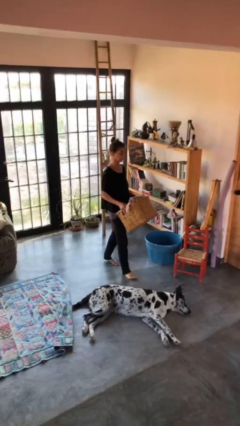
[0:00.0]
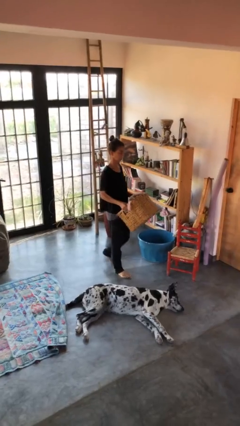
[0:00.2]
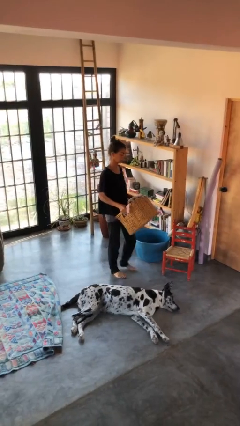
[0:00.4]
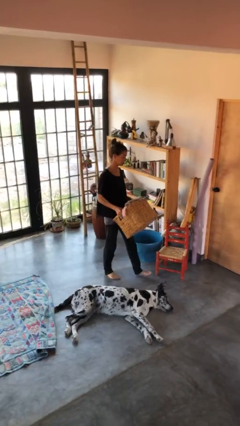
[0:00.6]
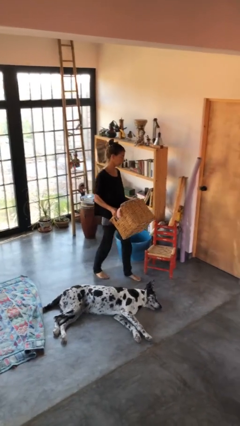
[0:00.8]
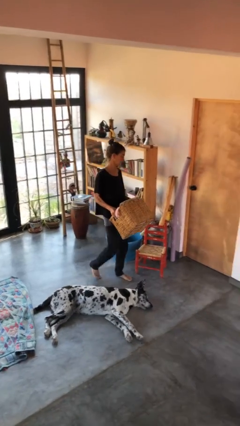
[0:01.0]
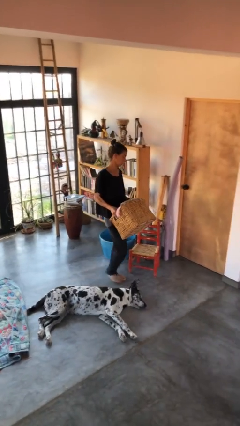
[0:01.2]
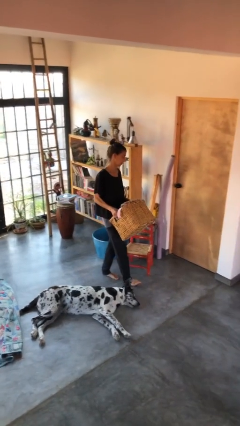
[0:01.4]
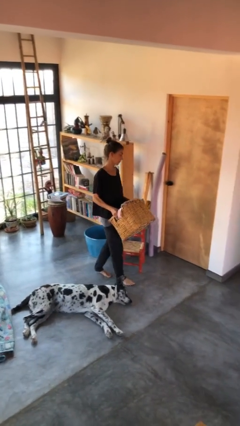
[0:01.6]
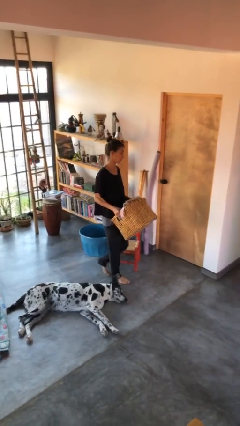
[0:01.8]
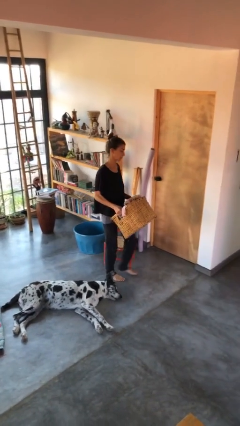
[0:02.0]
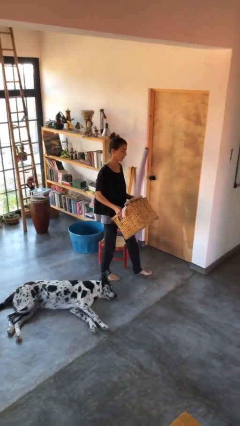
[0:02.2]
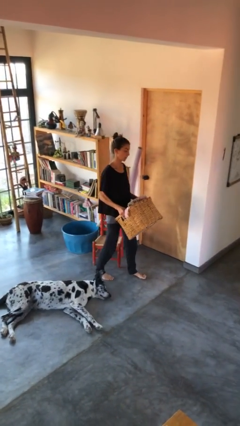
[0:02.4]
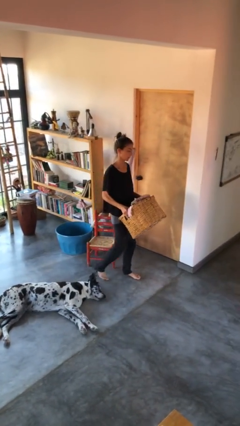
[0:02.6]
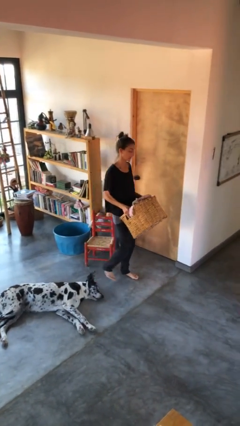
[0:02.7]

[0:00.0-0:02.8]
person carries laundry basket

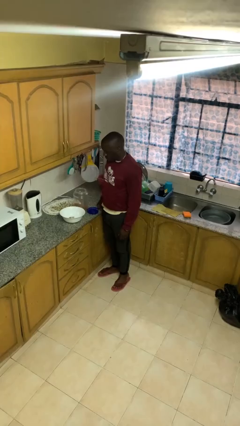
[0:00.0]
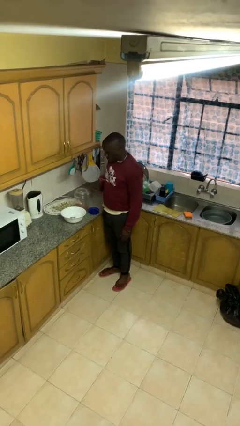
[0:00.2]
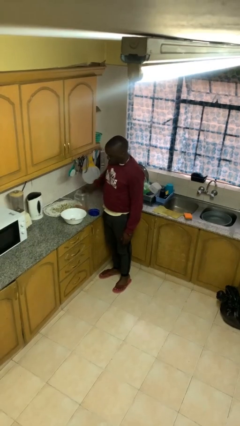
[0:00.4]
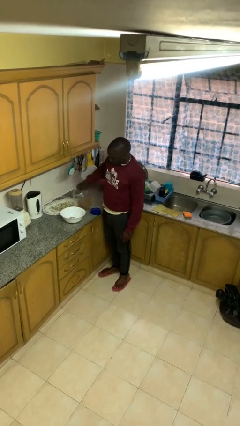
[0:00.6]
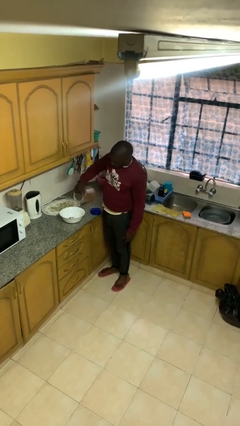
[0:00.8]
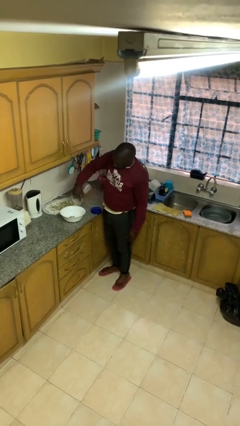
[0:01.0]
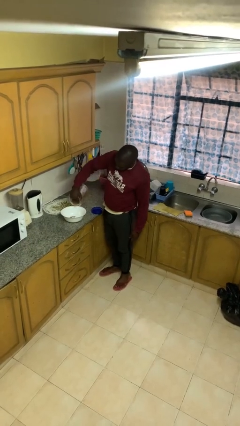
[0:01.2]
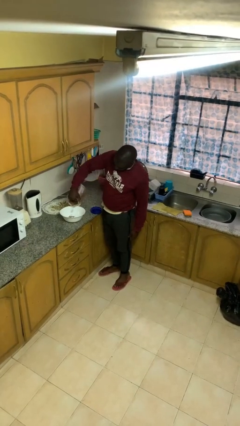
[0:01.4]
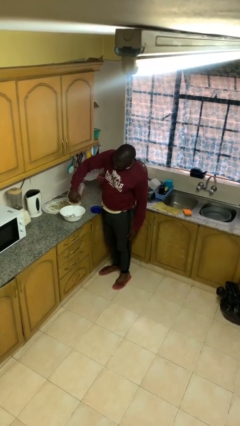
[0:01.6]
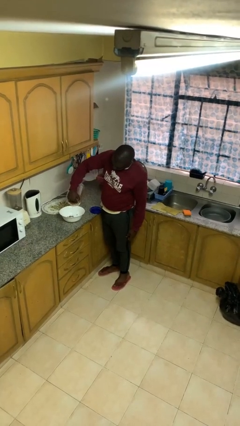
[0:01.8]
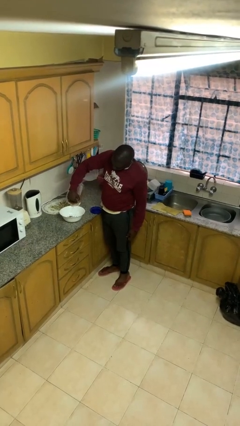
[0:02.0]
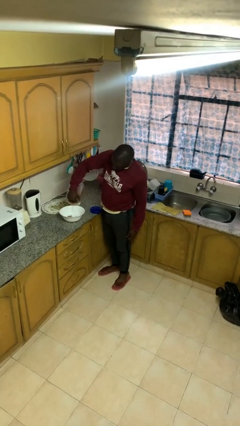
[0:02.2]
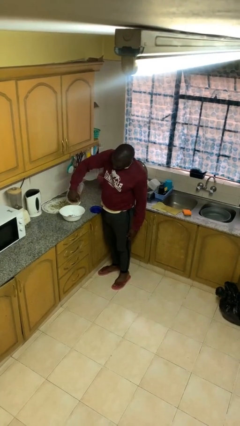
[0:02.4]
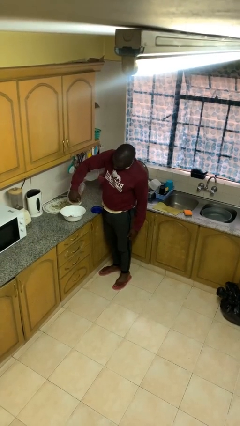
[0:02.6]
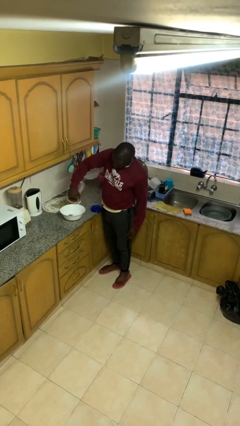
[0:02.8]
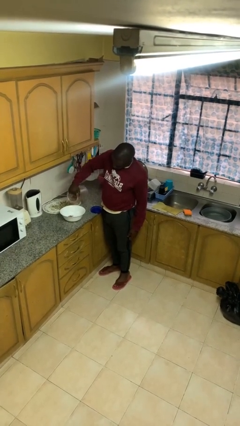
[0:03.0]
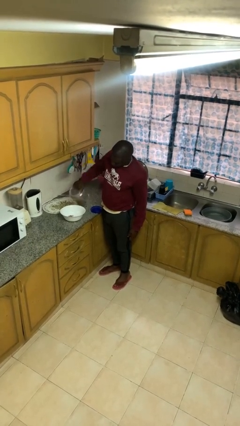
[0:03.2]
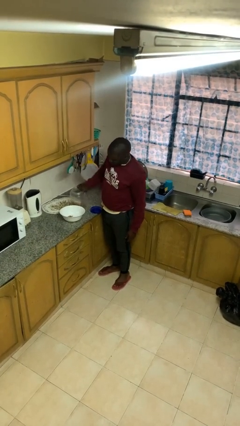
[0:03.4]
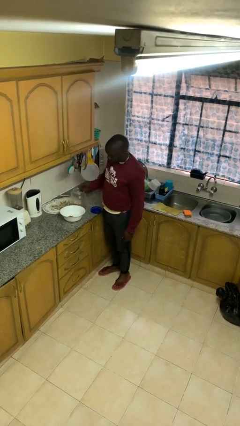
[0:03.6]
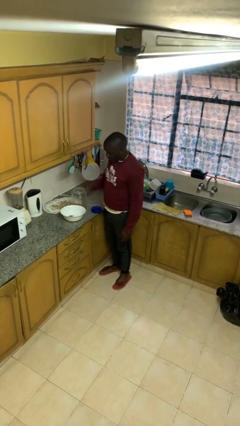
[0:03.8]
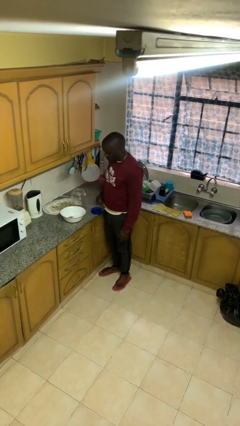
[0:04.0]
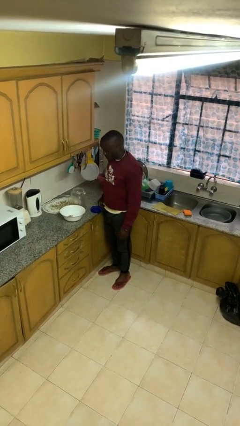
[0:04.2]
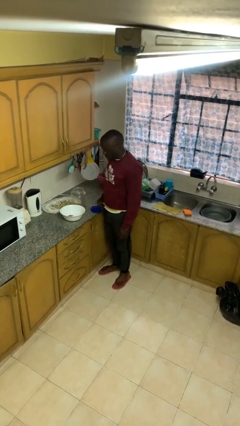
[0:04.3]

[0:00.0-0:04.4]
person pours into bowl

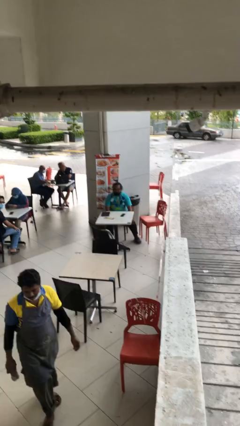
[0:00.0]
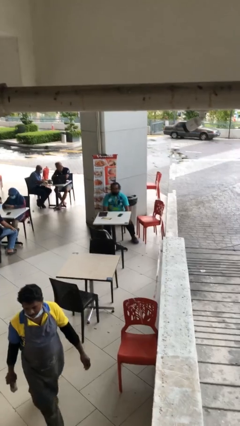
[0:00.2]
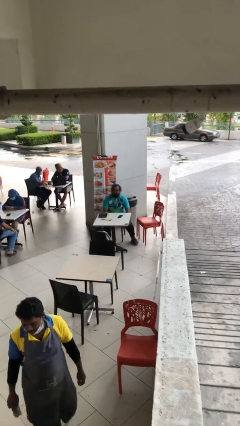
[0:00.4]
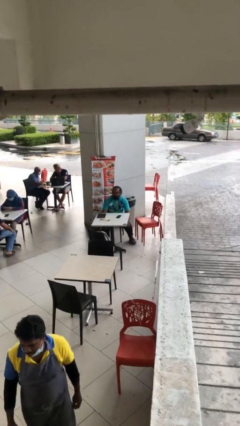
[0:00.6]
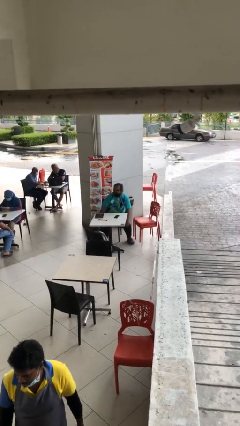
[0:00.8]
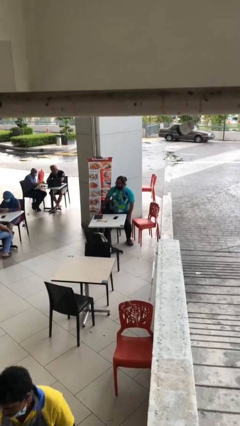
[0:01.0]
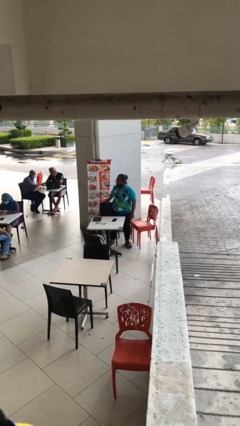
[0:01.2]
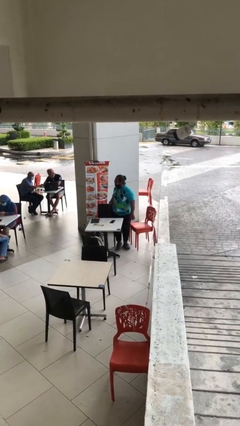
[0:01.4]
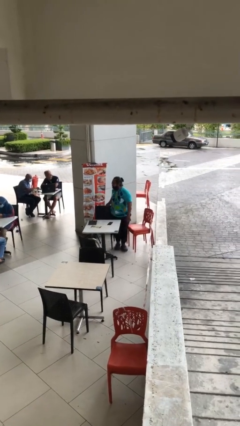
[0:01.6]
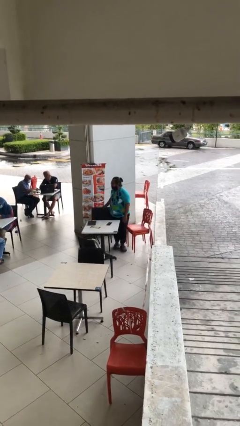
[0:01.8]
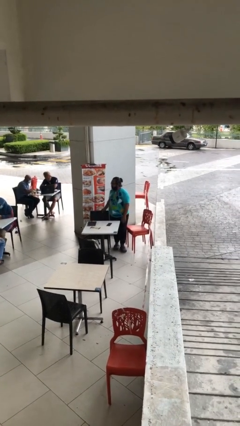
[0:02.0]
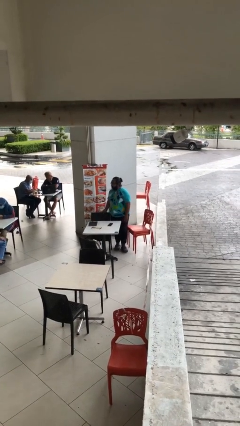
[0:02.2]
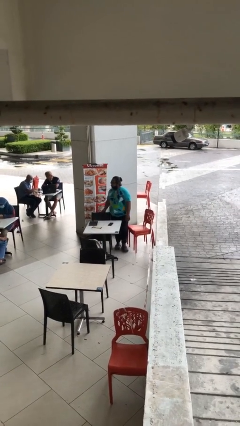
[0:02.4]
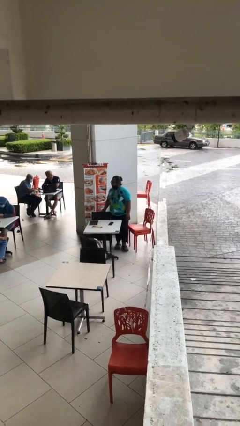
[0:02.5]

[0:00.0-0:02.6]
person stands up

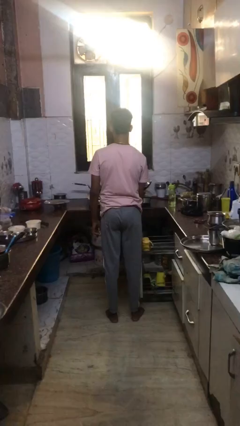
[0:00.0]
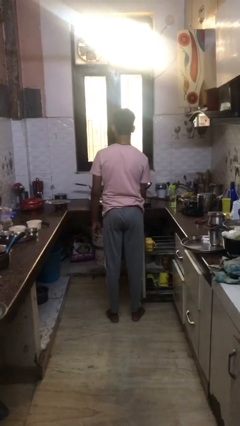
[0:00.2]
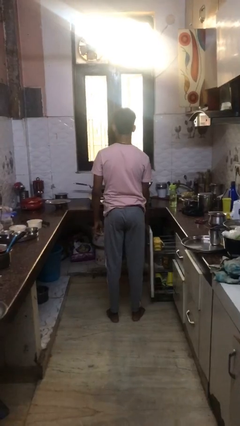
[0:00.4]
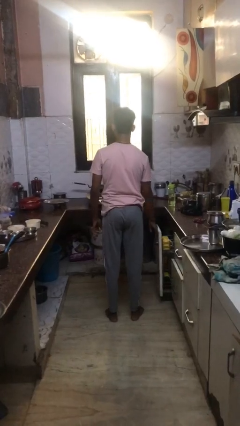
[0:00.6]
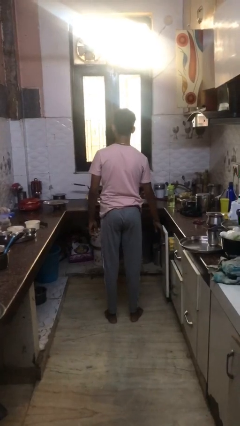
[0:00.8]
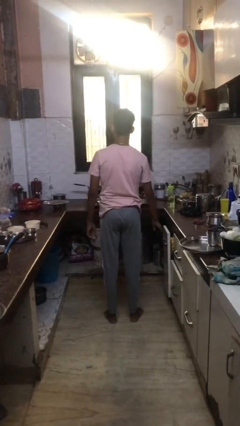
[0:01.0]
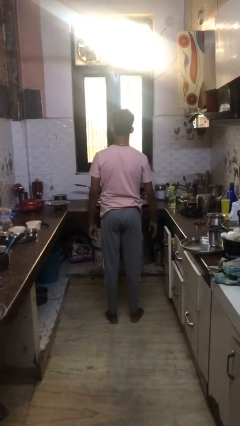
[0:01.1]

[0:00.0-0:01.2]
person closes dishwasher

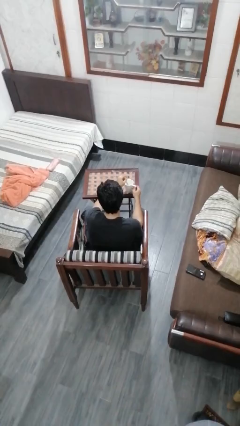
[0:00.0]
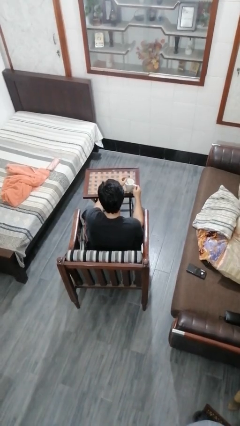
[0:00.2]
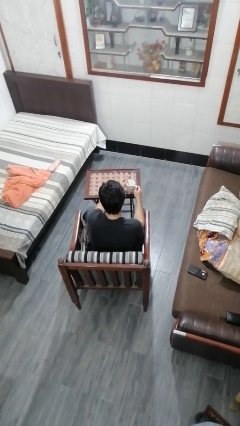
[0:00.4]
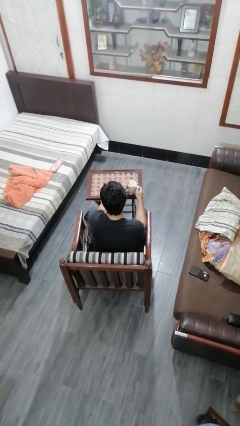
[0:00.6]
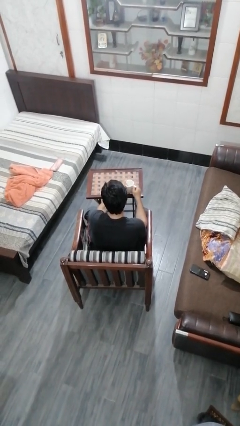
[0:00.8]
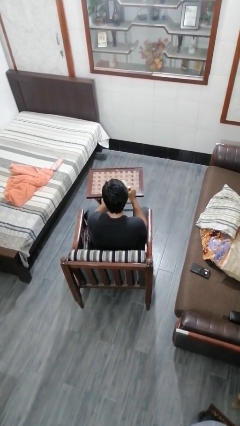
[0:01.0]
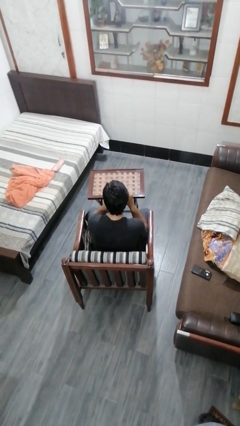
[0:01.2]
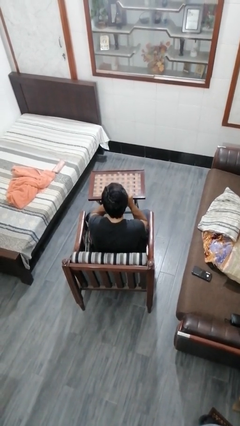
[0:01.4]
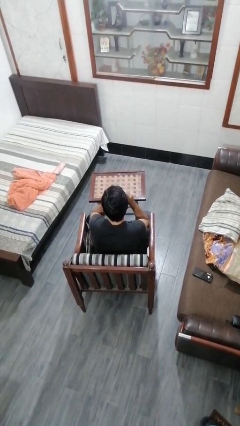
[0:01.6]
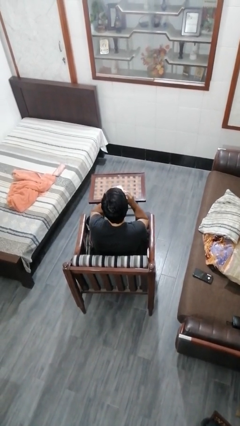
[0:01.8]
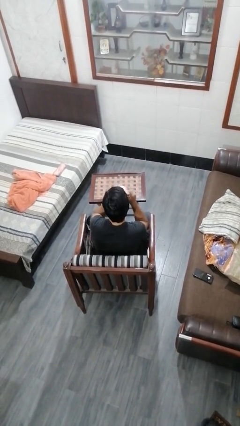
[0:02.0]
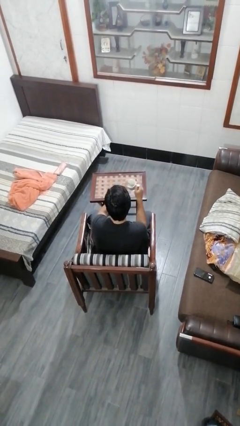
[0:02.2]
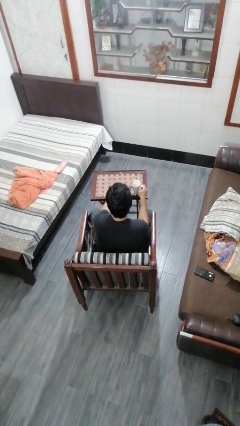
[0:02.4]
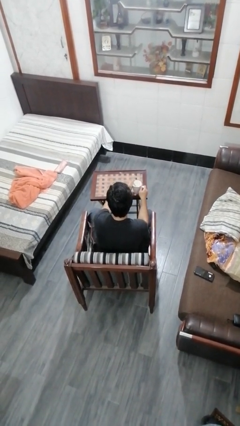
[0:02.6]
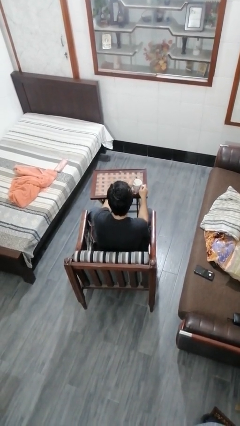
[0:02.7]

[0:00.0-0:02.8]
person drinks from mug

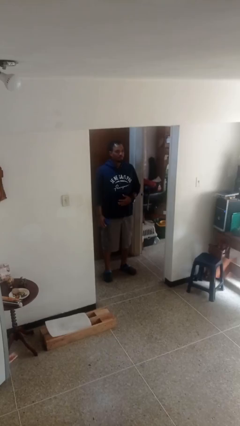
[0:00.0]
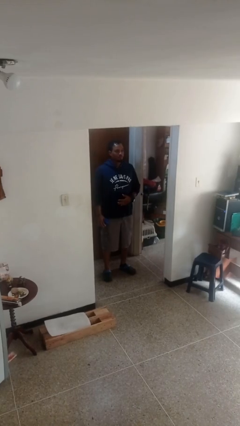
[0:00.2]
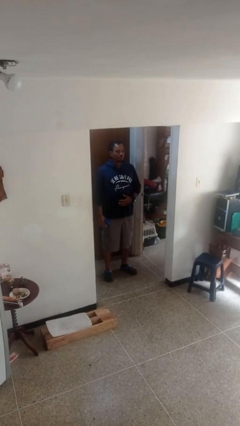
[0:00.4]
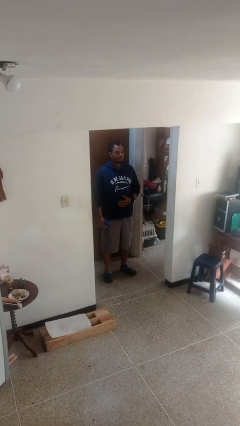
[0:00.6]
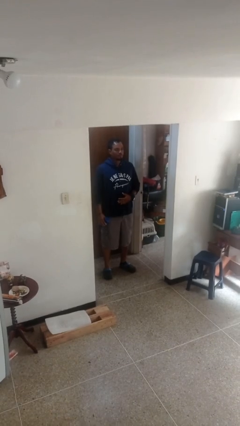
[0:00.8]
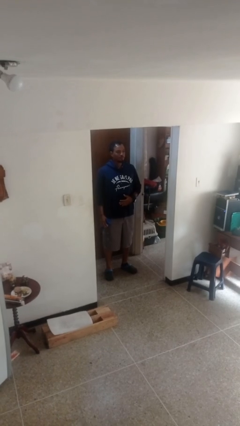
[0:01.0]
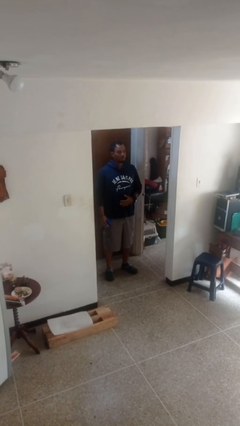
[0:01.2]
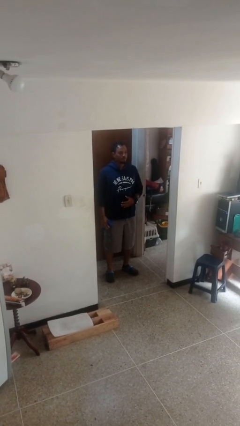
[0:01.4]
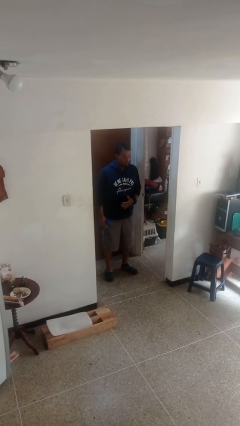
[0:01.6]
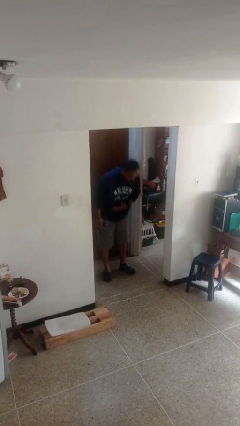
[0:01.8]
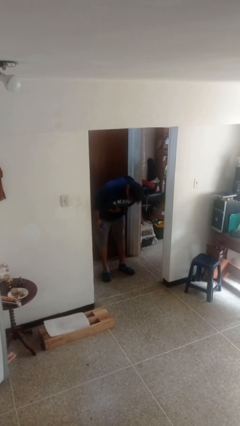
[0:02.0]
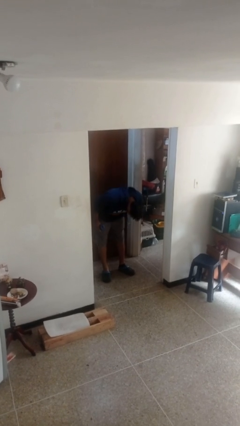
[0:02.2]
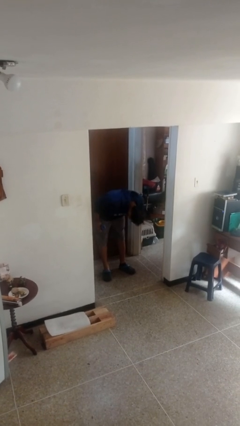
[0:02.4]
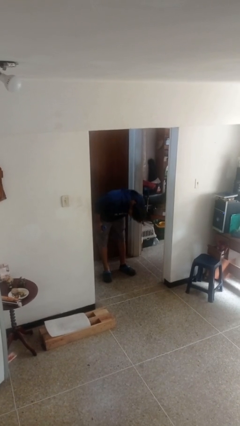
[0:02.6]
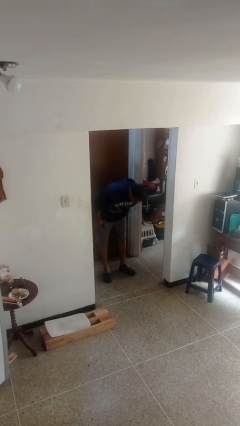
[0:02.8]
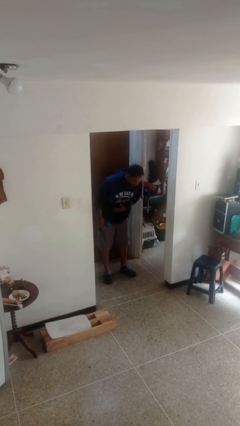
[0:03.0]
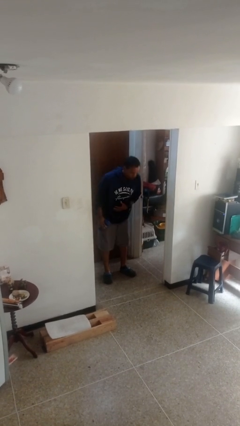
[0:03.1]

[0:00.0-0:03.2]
person bows
